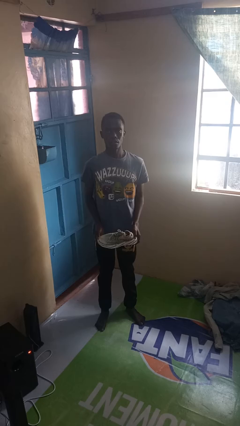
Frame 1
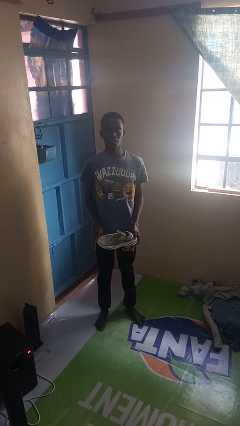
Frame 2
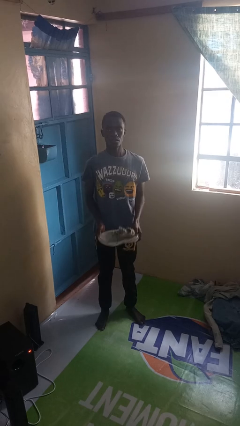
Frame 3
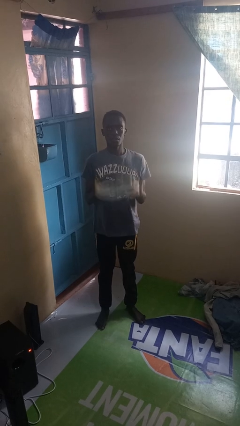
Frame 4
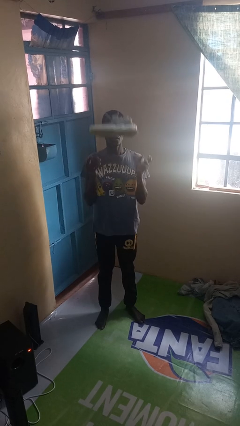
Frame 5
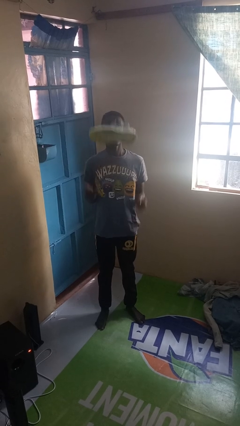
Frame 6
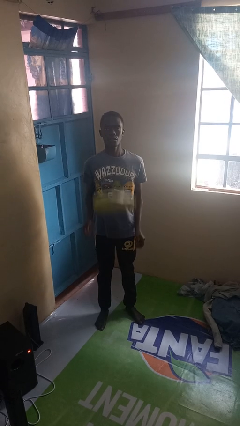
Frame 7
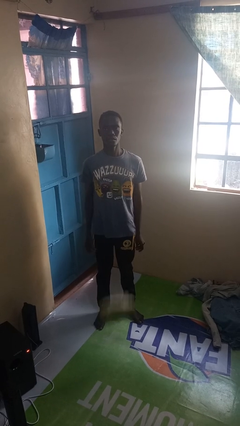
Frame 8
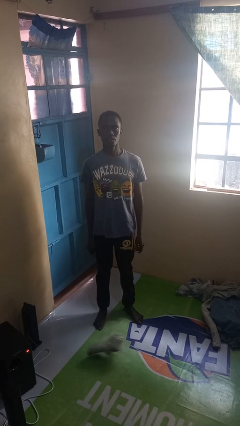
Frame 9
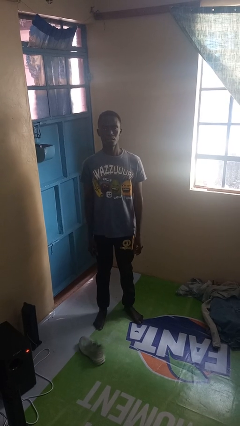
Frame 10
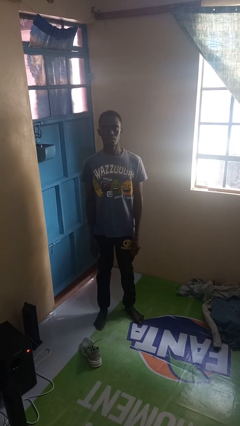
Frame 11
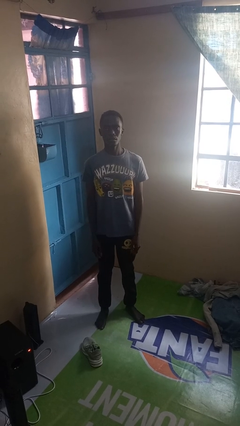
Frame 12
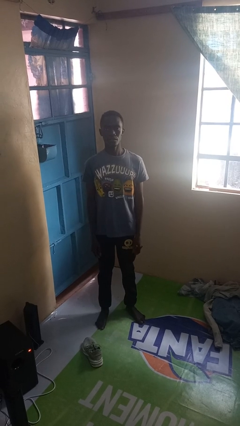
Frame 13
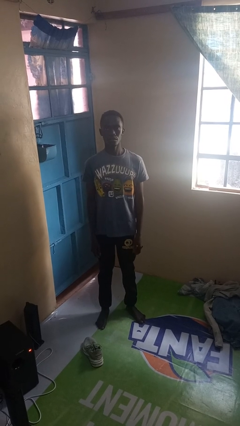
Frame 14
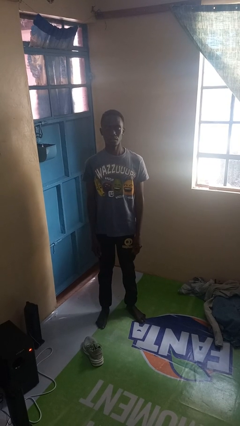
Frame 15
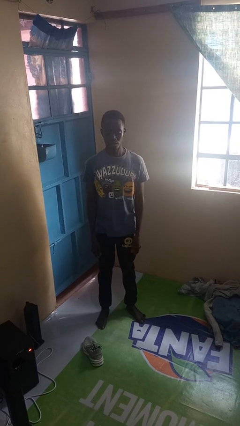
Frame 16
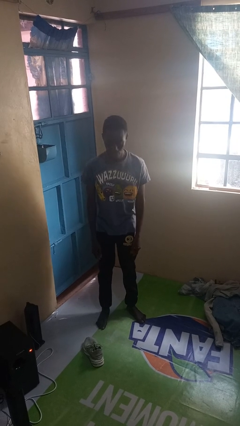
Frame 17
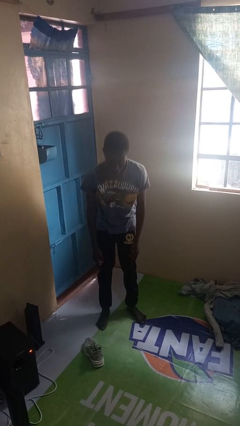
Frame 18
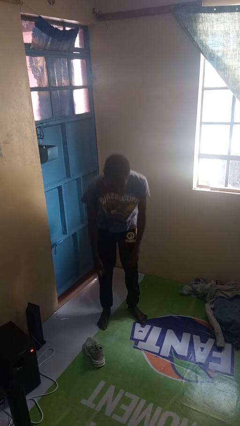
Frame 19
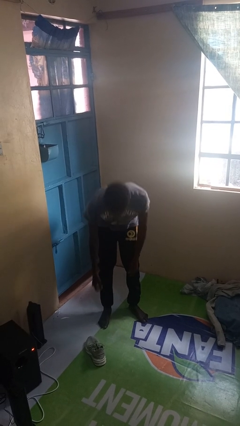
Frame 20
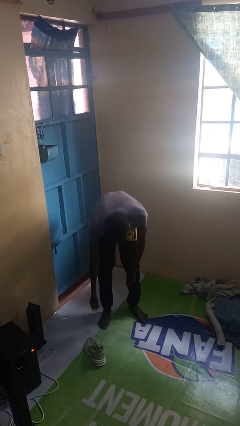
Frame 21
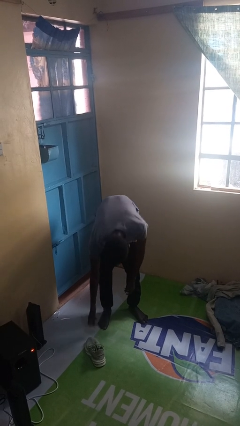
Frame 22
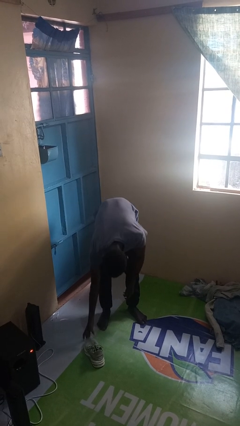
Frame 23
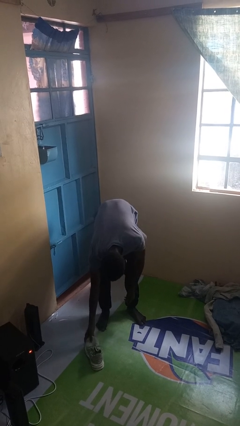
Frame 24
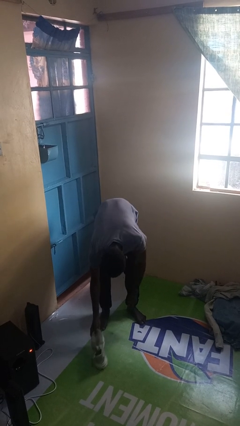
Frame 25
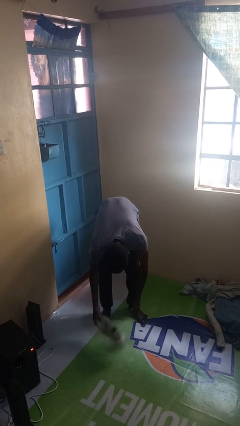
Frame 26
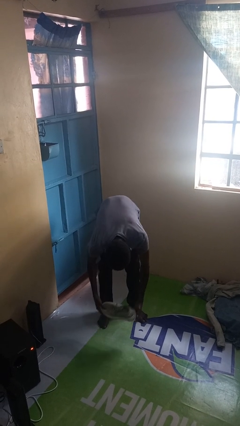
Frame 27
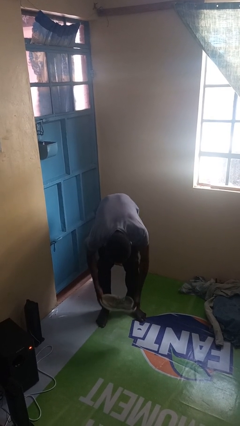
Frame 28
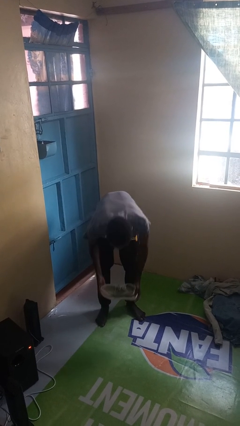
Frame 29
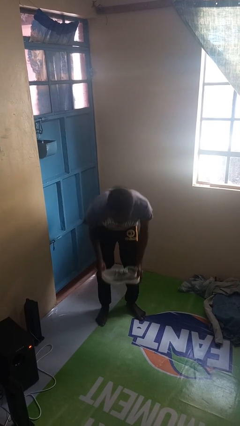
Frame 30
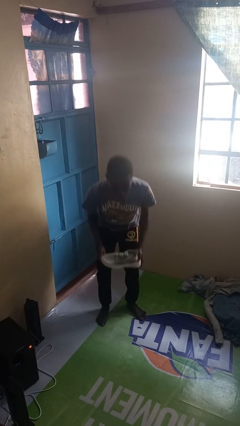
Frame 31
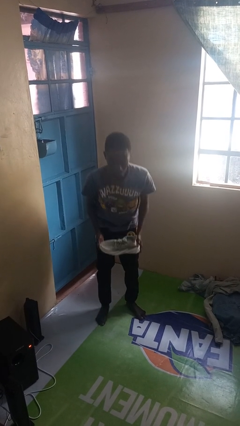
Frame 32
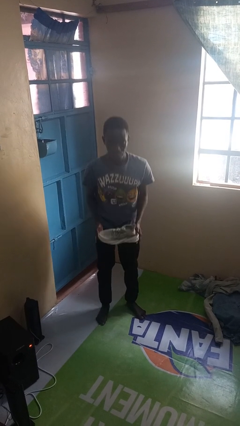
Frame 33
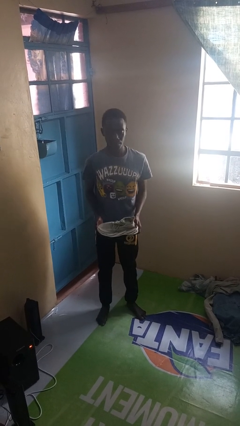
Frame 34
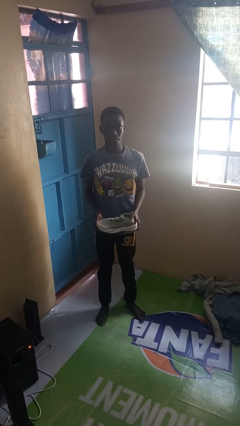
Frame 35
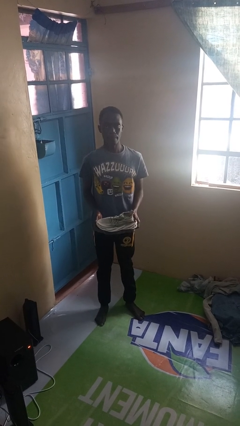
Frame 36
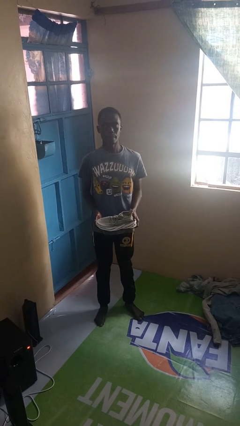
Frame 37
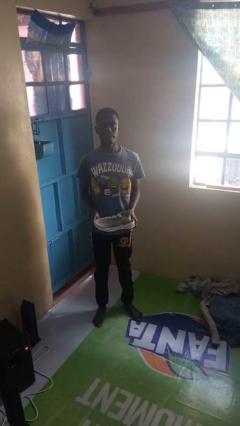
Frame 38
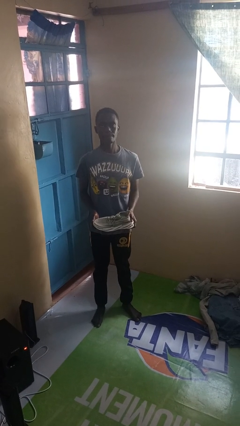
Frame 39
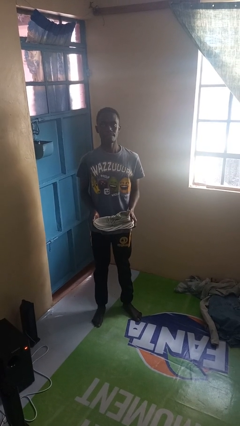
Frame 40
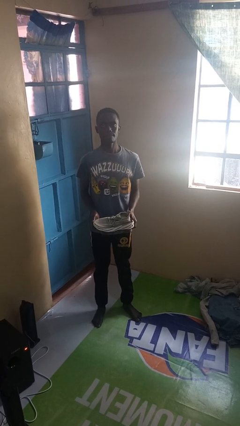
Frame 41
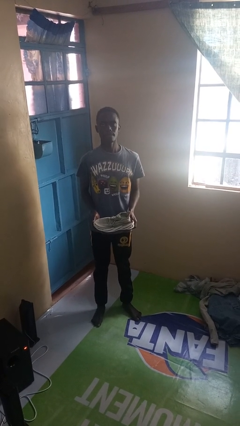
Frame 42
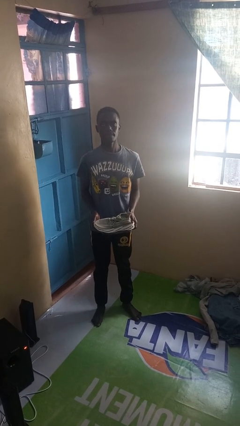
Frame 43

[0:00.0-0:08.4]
person throws object into air

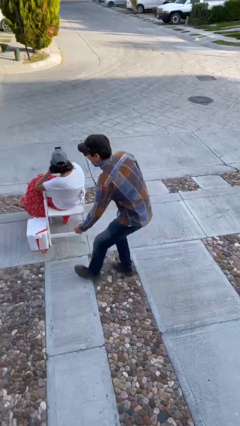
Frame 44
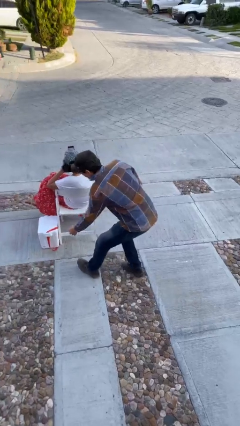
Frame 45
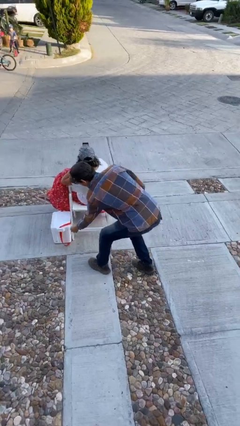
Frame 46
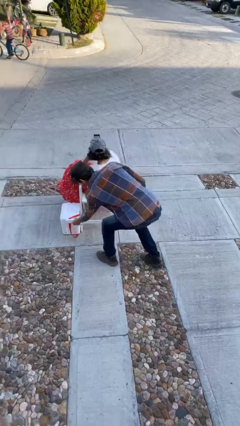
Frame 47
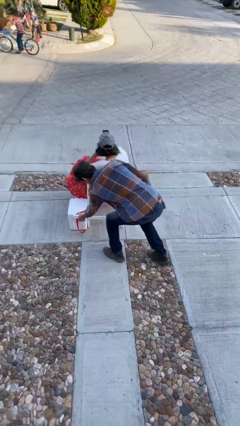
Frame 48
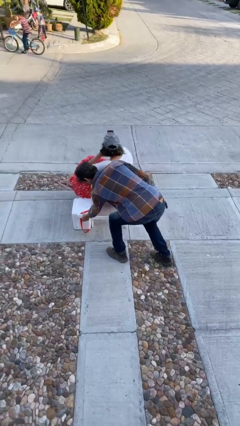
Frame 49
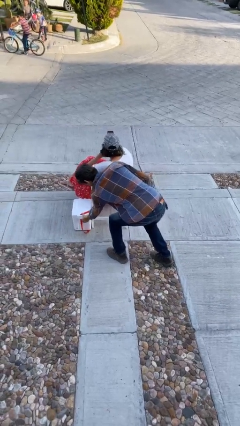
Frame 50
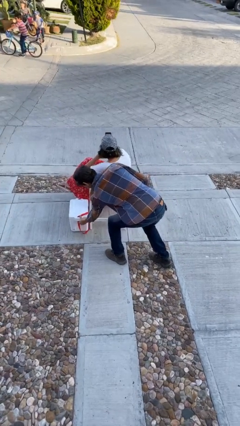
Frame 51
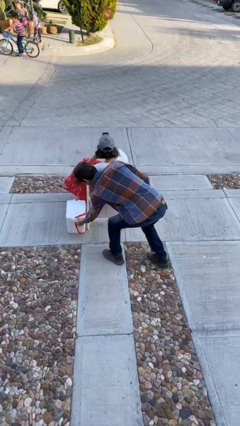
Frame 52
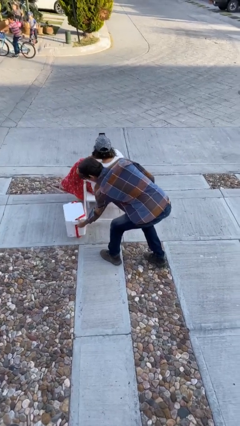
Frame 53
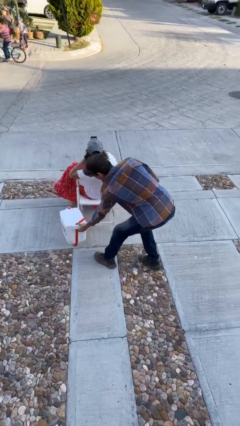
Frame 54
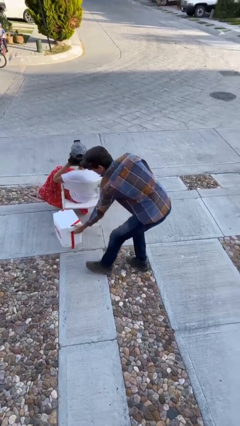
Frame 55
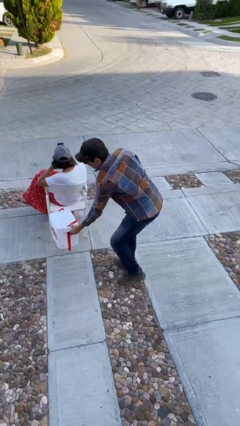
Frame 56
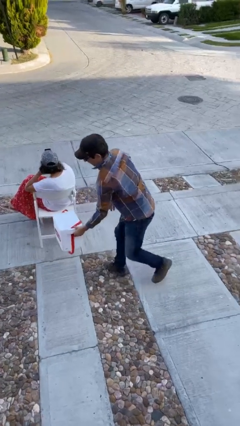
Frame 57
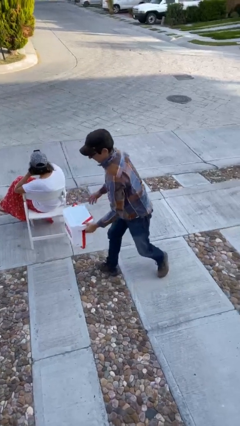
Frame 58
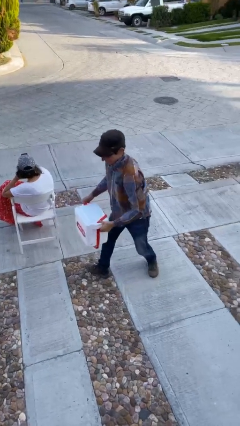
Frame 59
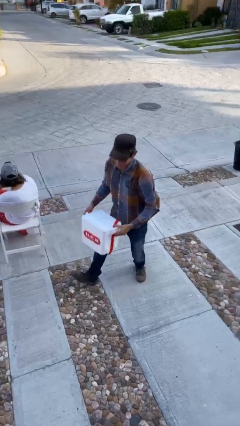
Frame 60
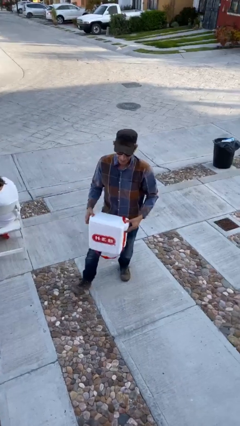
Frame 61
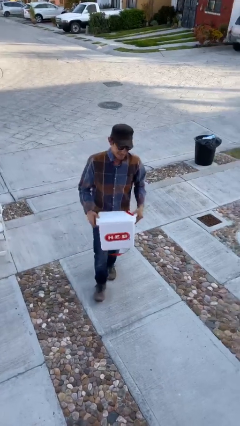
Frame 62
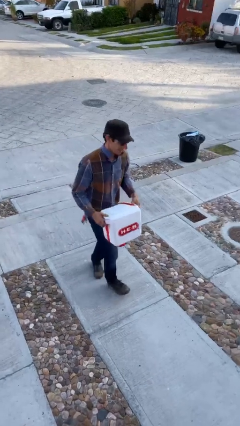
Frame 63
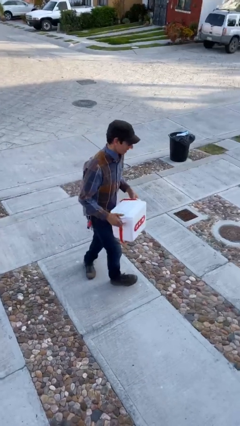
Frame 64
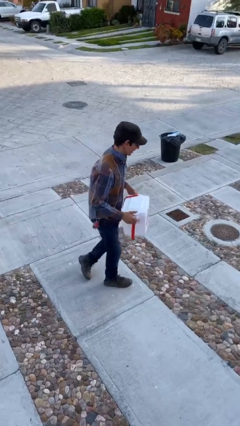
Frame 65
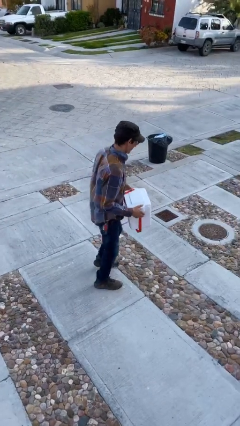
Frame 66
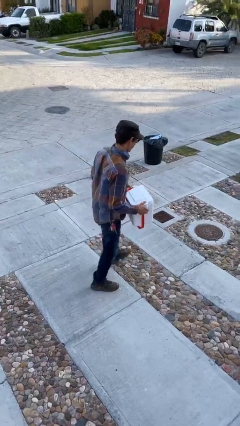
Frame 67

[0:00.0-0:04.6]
person steals object from person

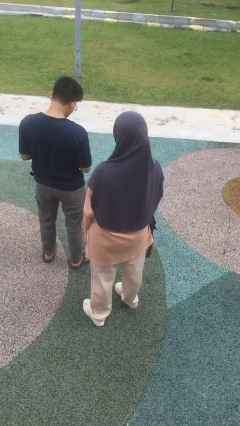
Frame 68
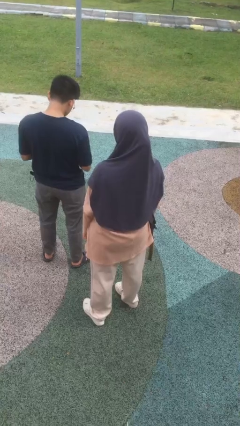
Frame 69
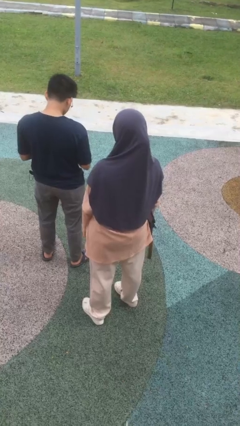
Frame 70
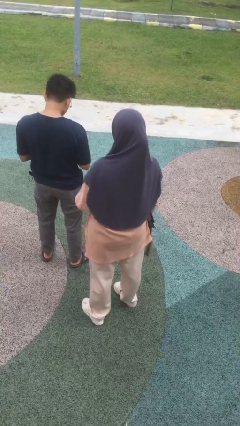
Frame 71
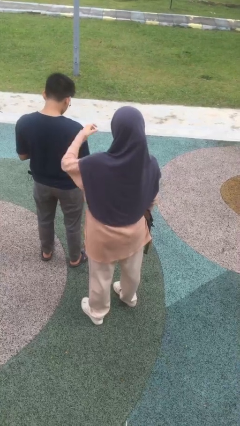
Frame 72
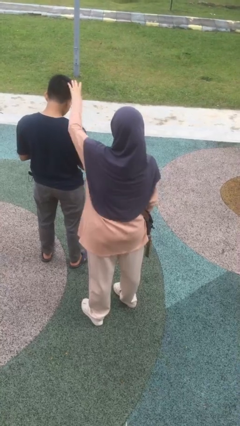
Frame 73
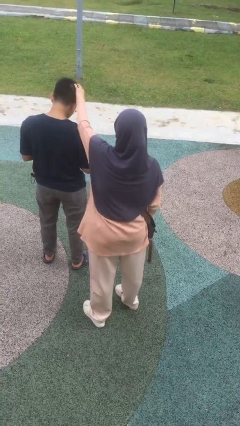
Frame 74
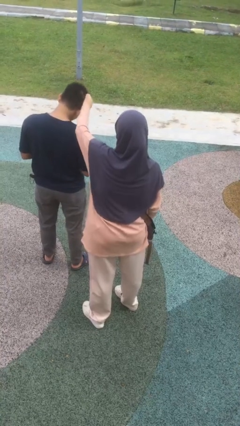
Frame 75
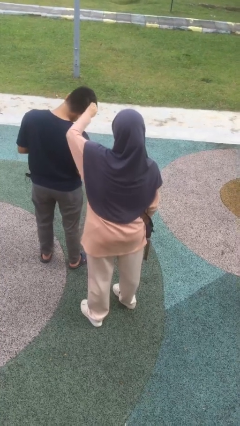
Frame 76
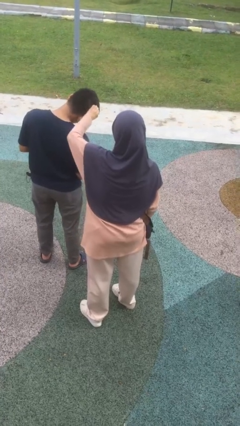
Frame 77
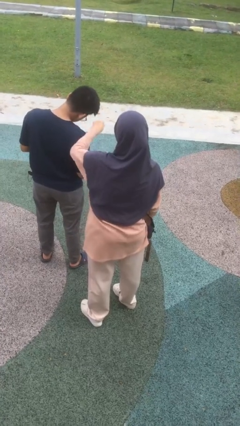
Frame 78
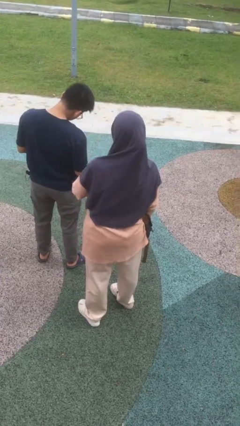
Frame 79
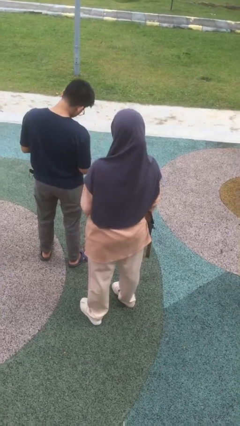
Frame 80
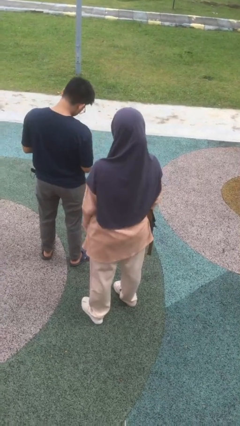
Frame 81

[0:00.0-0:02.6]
person grabs person by hair

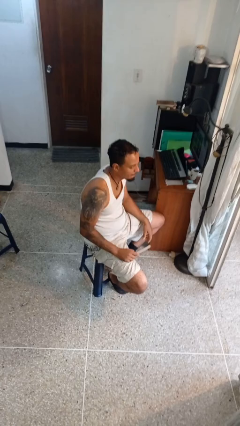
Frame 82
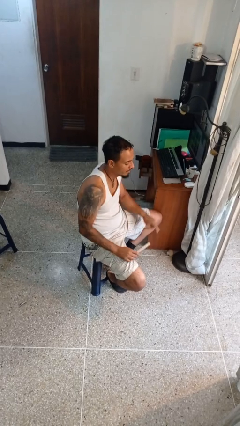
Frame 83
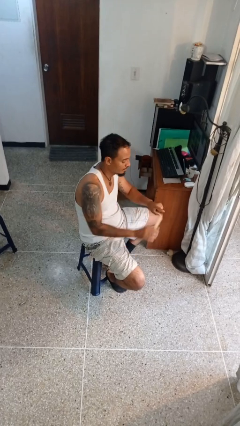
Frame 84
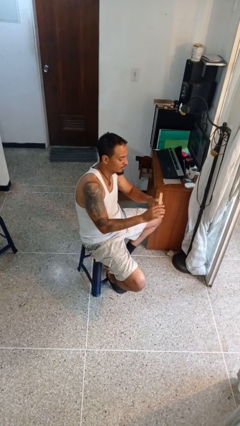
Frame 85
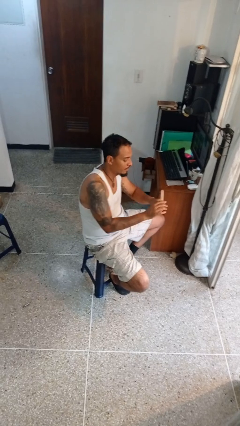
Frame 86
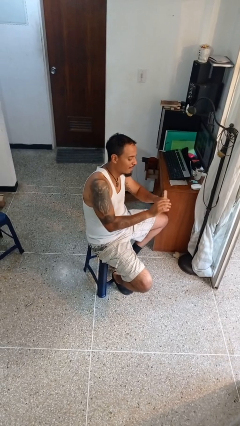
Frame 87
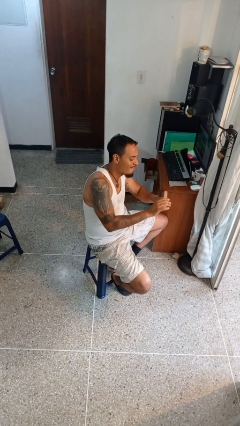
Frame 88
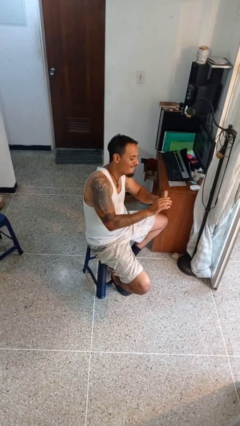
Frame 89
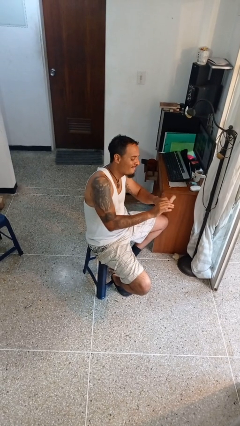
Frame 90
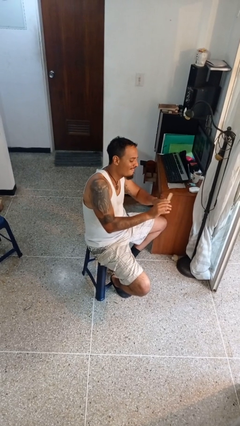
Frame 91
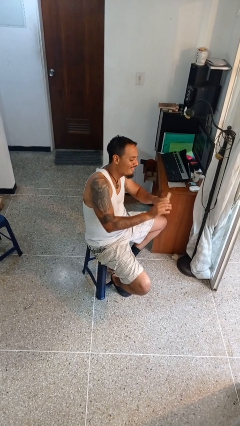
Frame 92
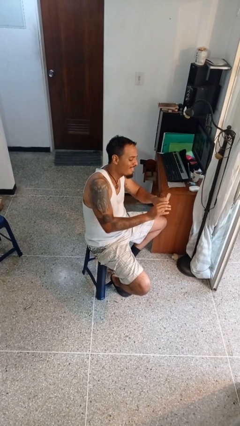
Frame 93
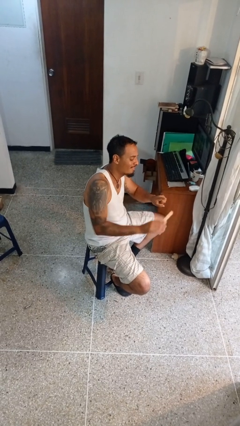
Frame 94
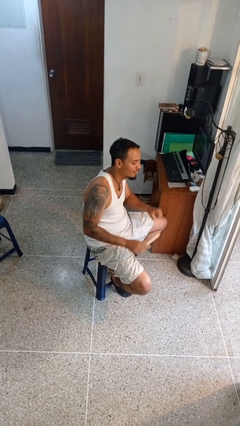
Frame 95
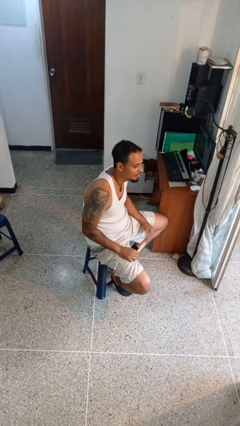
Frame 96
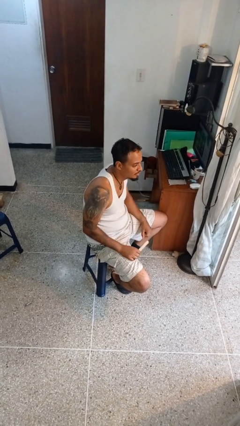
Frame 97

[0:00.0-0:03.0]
person files fingernails
